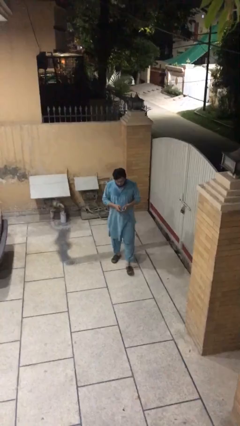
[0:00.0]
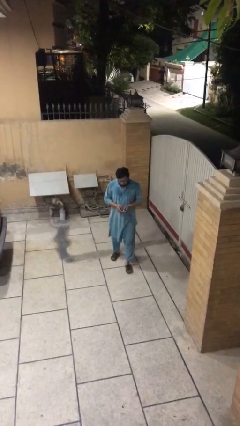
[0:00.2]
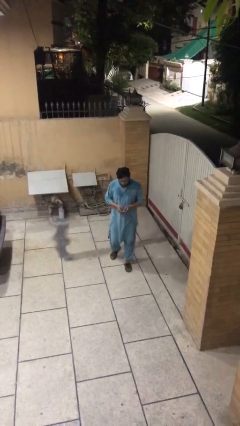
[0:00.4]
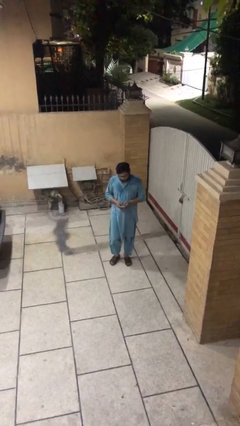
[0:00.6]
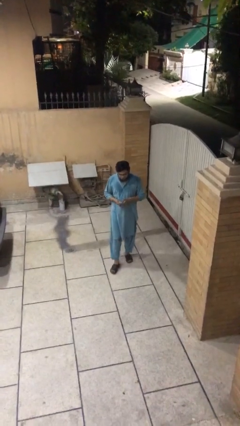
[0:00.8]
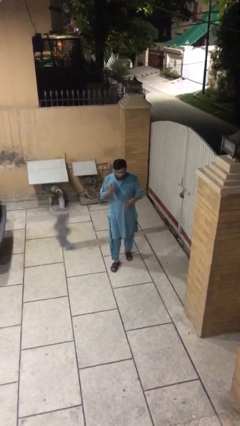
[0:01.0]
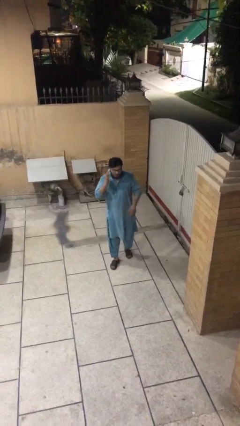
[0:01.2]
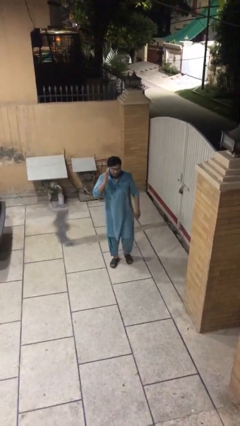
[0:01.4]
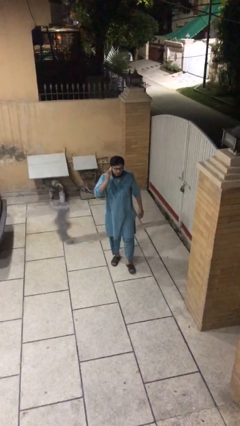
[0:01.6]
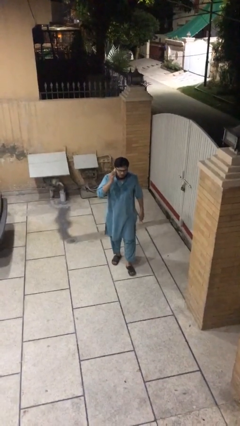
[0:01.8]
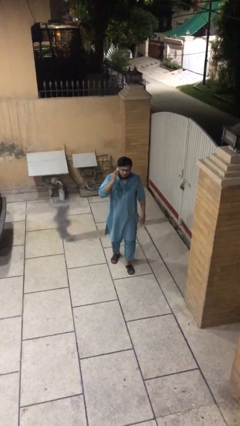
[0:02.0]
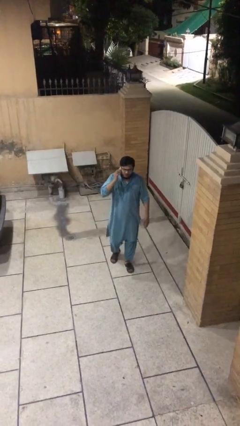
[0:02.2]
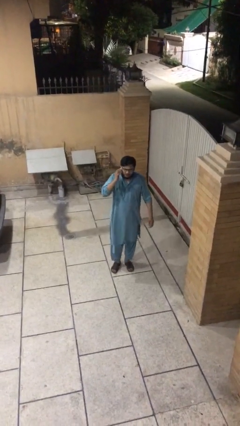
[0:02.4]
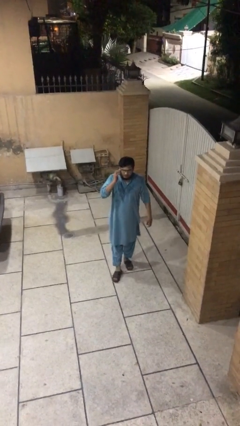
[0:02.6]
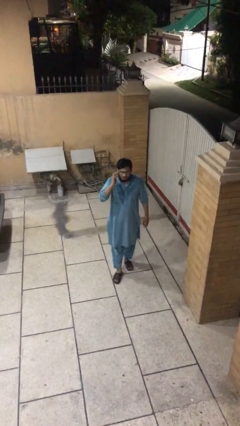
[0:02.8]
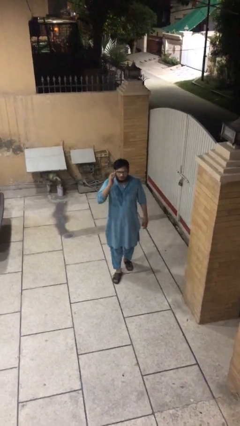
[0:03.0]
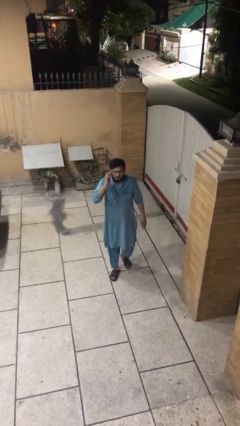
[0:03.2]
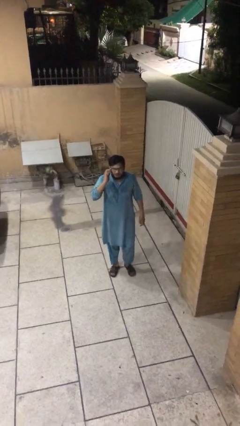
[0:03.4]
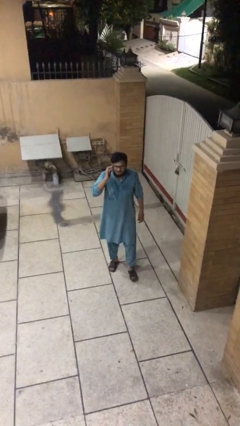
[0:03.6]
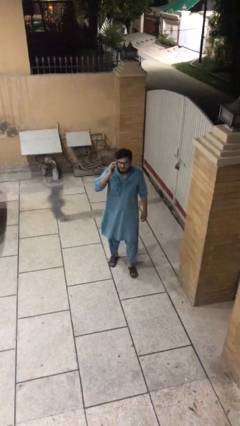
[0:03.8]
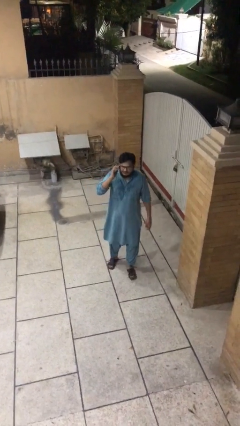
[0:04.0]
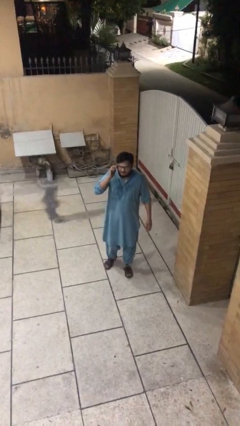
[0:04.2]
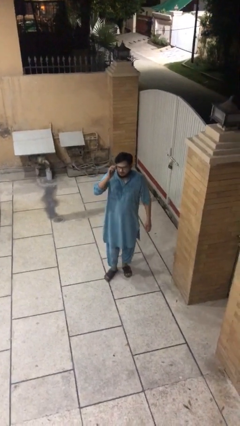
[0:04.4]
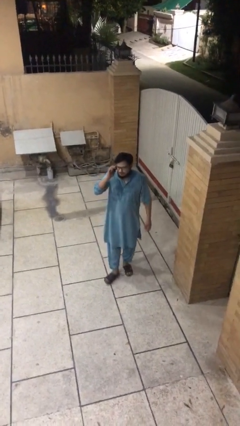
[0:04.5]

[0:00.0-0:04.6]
person talks on phone

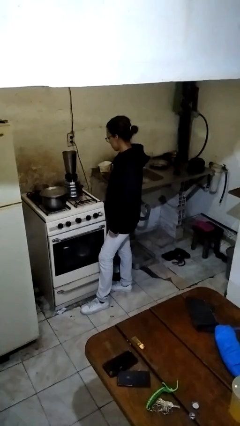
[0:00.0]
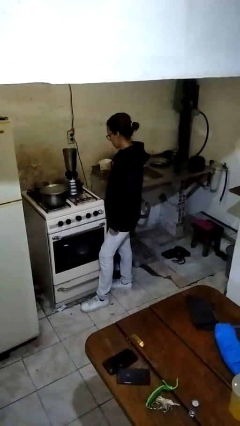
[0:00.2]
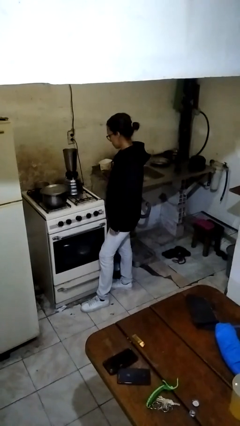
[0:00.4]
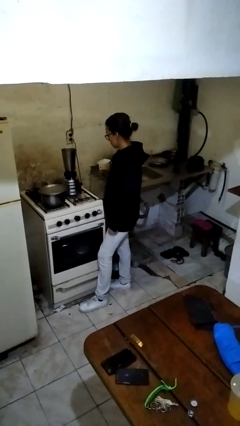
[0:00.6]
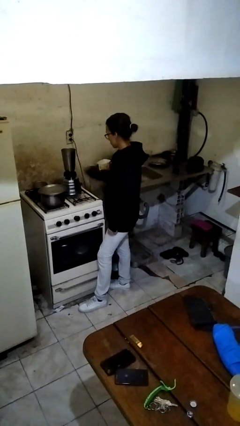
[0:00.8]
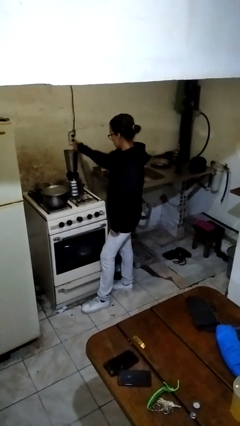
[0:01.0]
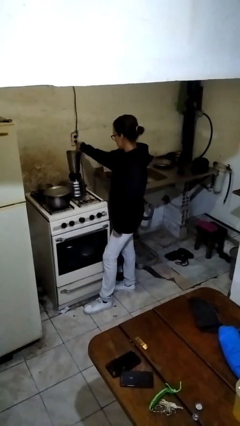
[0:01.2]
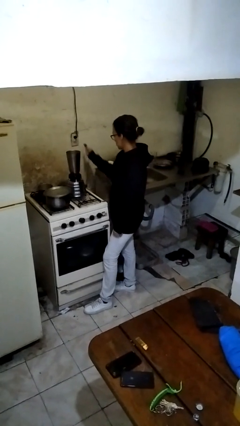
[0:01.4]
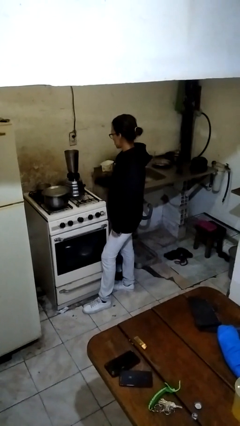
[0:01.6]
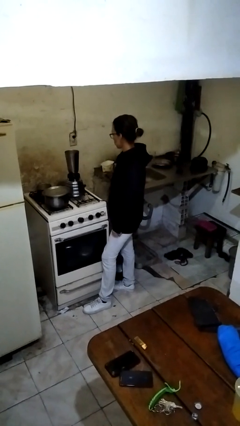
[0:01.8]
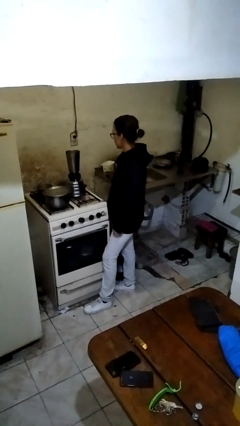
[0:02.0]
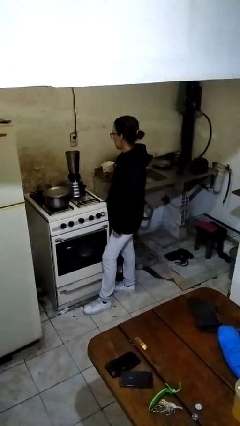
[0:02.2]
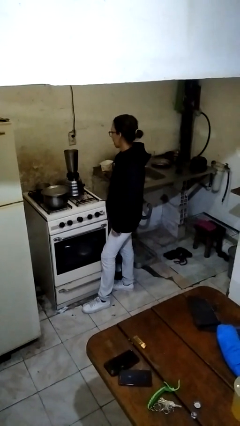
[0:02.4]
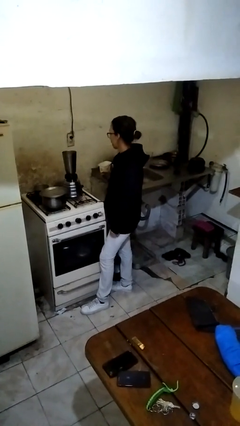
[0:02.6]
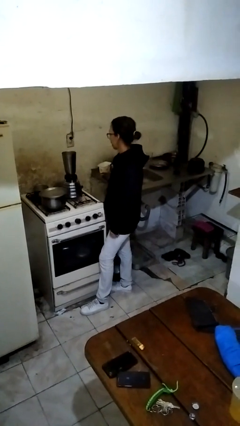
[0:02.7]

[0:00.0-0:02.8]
person unplugs from electrical socket

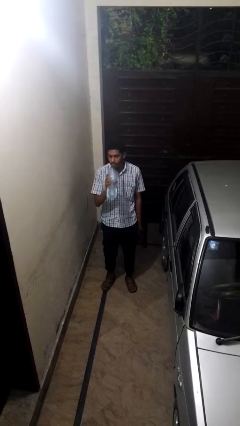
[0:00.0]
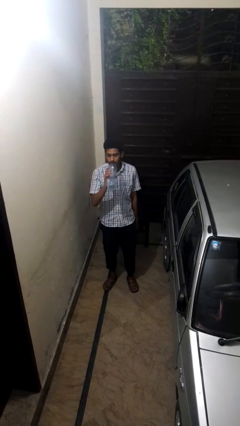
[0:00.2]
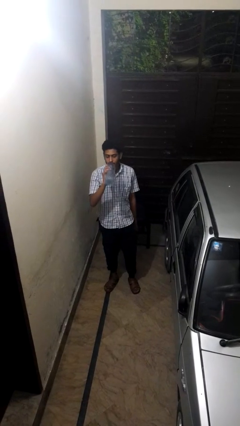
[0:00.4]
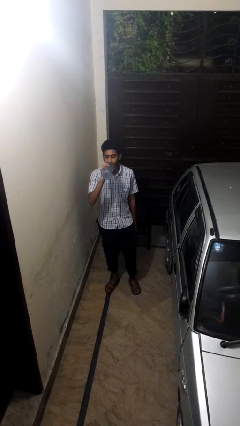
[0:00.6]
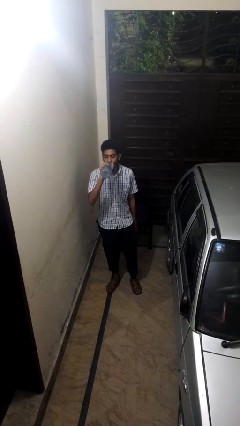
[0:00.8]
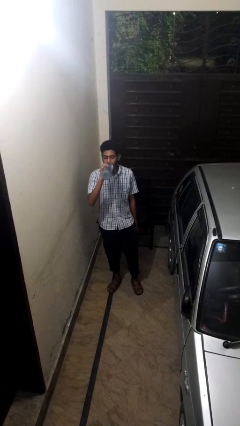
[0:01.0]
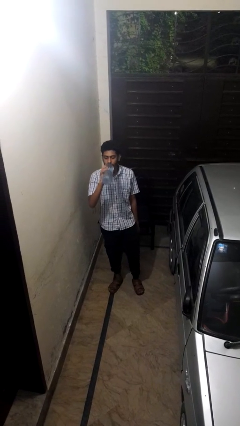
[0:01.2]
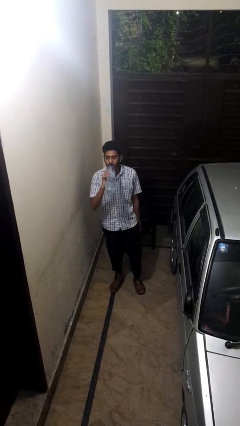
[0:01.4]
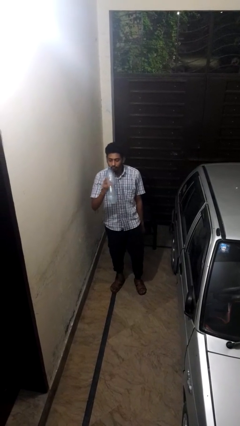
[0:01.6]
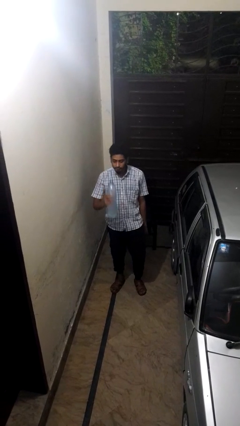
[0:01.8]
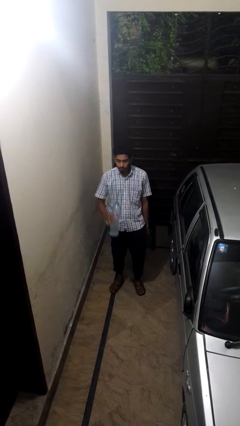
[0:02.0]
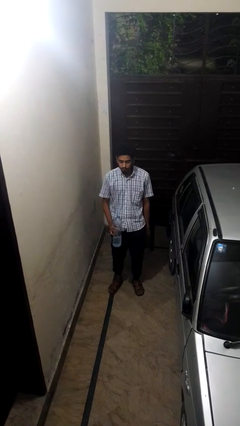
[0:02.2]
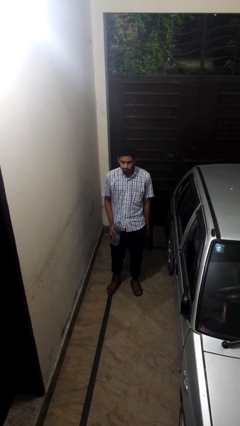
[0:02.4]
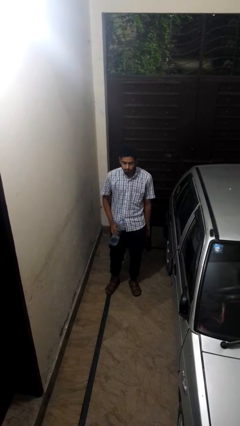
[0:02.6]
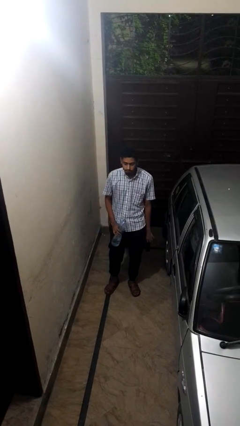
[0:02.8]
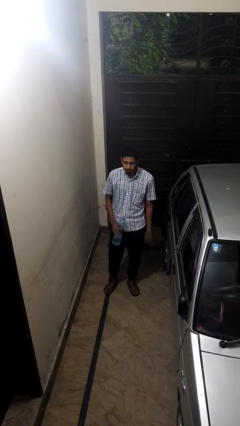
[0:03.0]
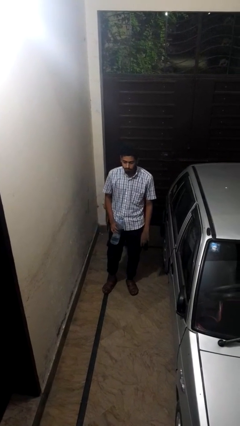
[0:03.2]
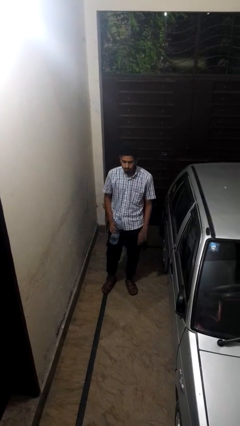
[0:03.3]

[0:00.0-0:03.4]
person drinks from bottle

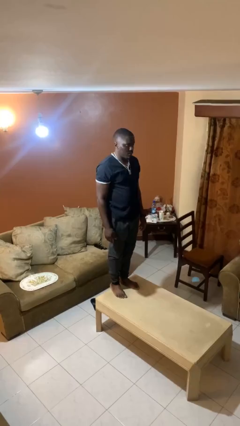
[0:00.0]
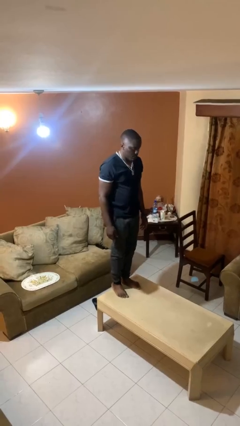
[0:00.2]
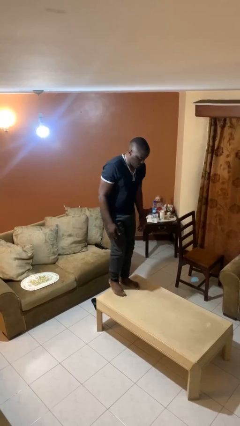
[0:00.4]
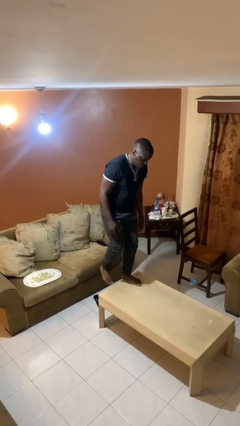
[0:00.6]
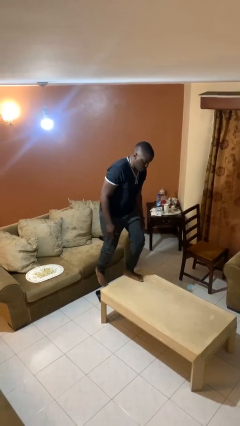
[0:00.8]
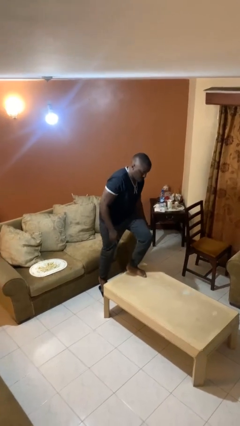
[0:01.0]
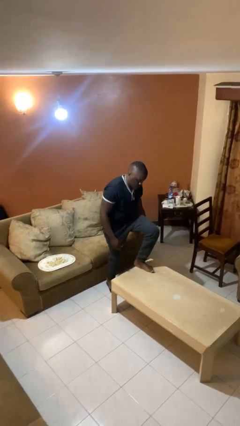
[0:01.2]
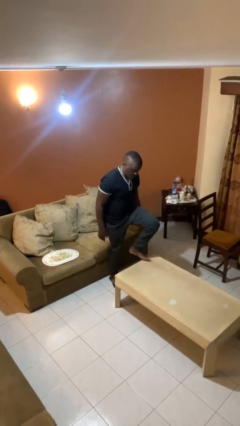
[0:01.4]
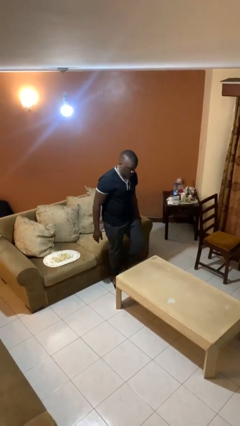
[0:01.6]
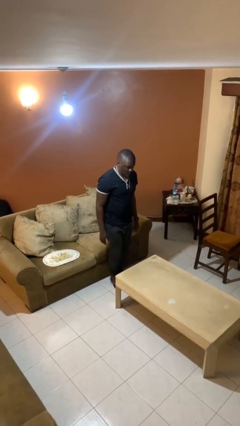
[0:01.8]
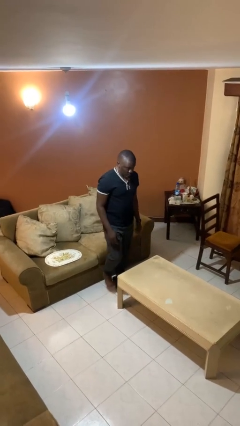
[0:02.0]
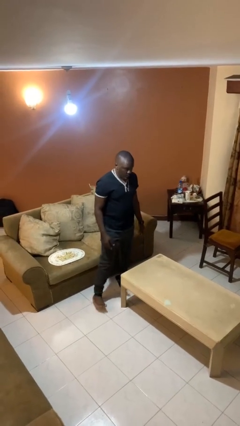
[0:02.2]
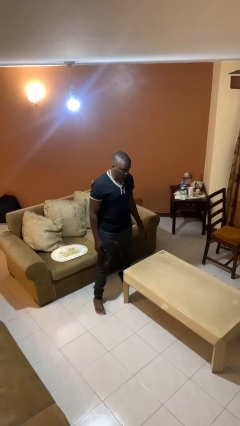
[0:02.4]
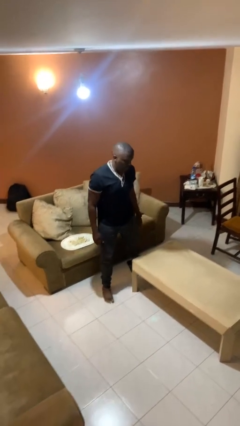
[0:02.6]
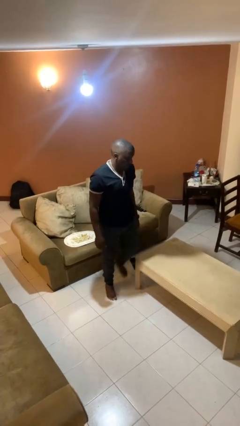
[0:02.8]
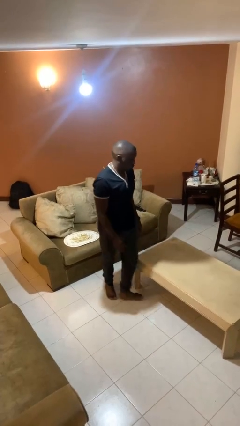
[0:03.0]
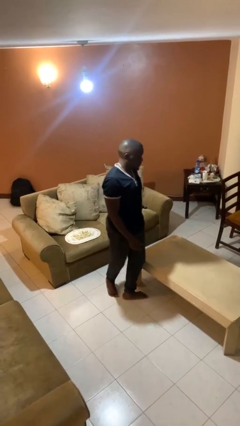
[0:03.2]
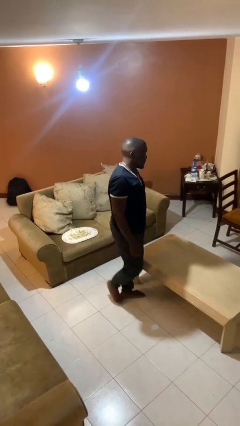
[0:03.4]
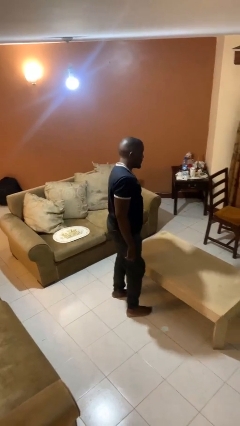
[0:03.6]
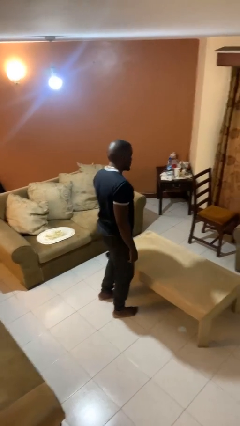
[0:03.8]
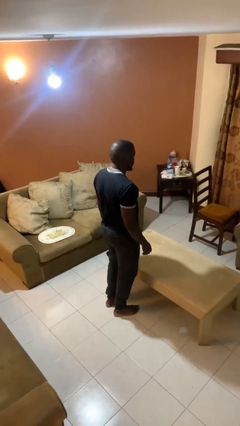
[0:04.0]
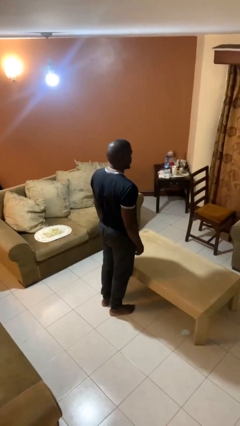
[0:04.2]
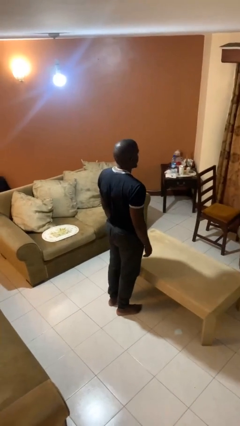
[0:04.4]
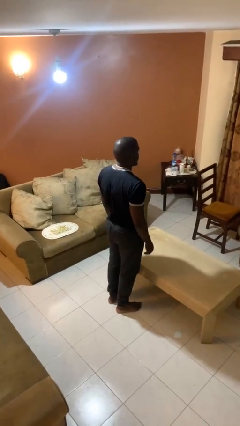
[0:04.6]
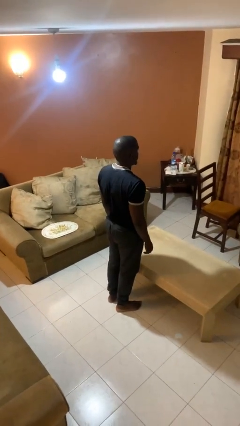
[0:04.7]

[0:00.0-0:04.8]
person climbs off table

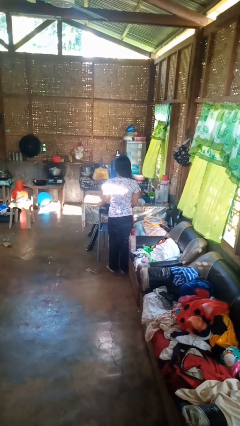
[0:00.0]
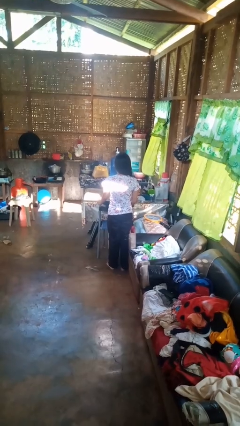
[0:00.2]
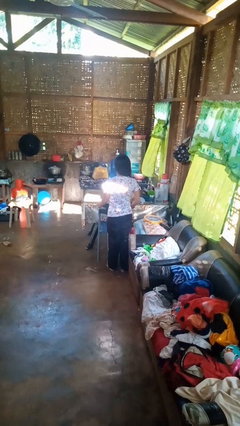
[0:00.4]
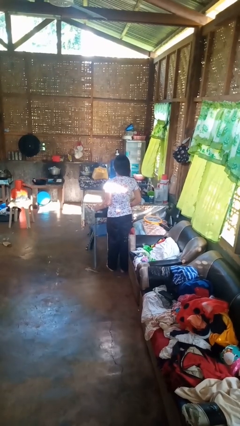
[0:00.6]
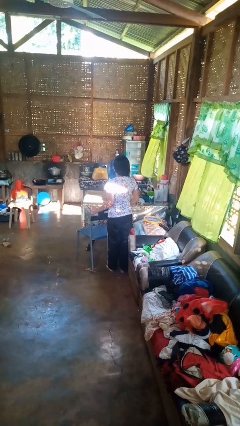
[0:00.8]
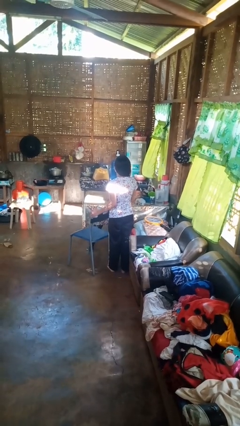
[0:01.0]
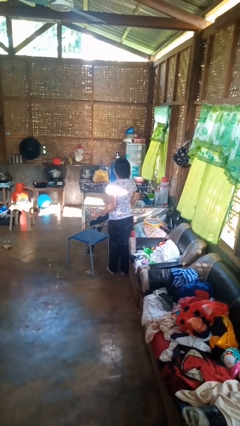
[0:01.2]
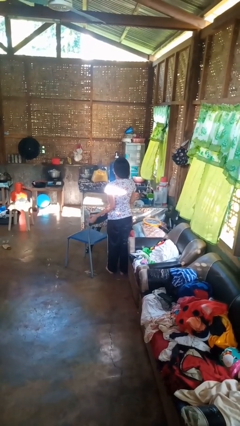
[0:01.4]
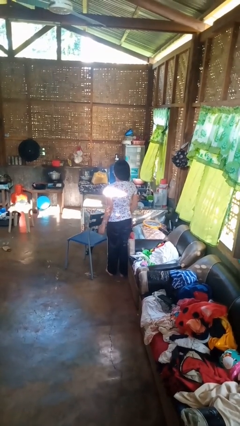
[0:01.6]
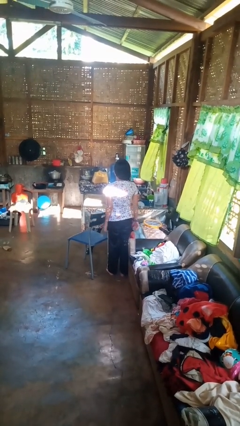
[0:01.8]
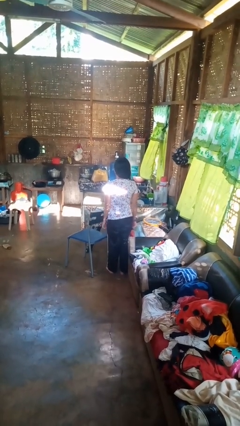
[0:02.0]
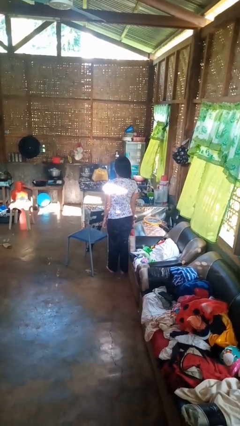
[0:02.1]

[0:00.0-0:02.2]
person pulls out chair
